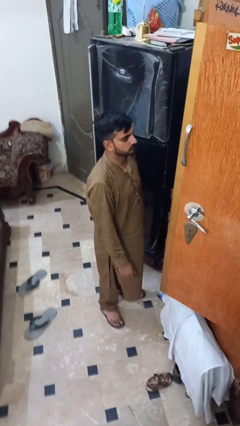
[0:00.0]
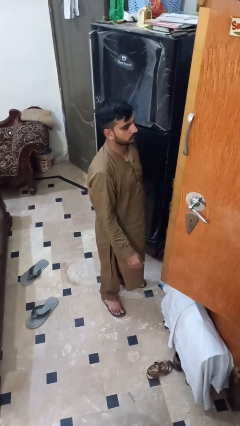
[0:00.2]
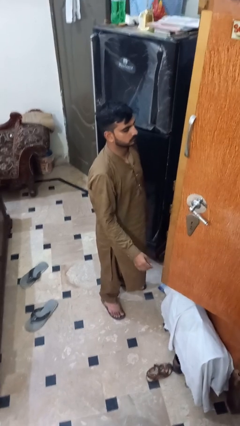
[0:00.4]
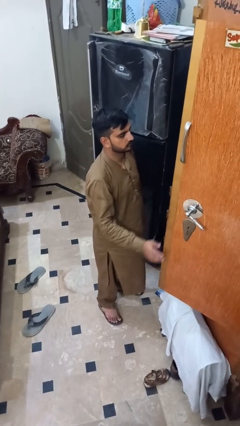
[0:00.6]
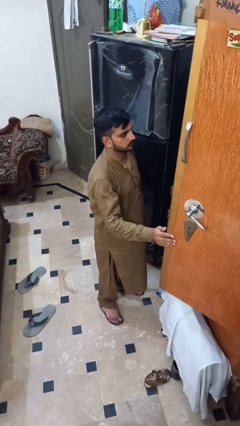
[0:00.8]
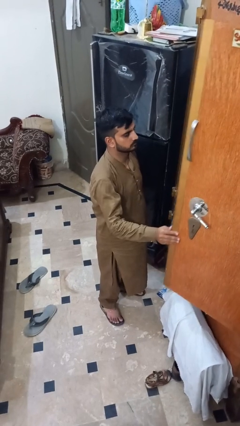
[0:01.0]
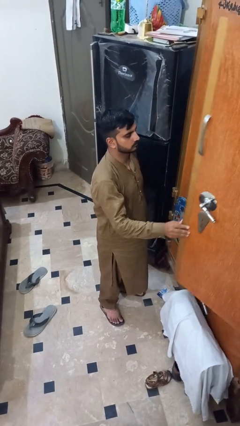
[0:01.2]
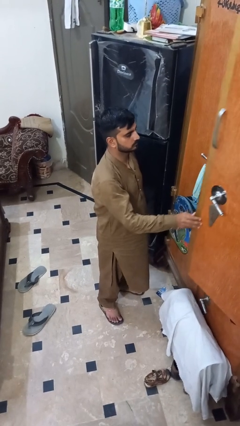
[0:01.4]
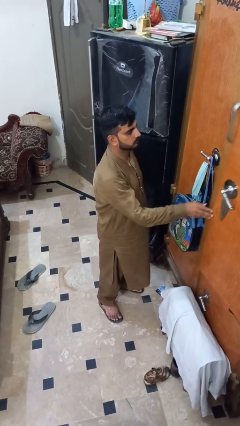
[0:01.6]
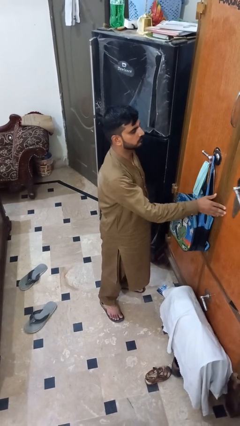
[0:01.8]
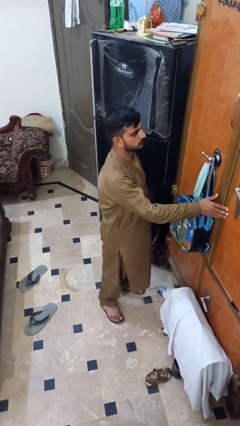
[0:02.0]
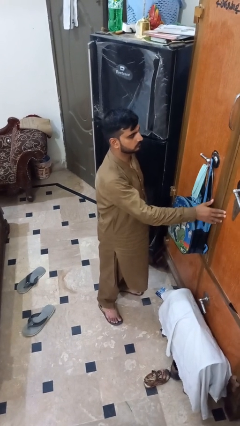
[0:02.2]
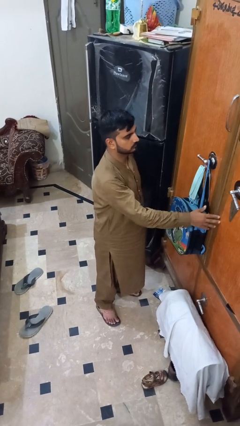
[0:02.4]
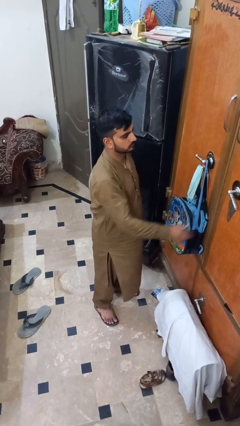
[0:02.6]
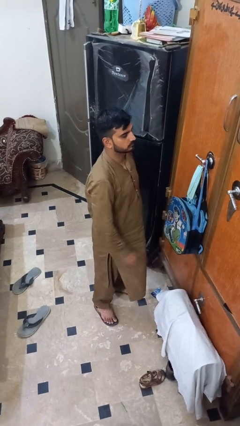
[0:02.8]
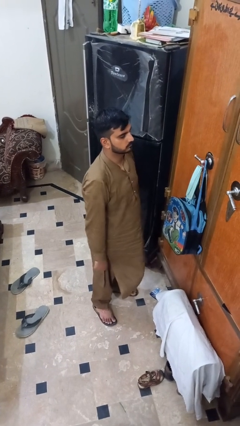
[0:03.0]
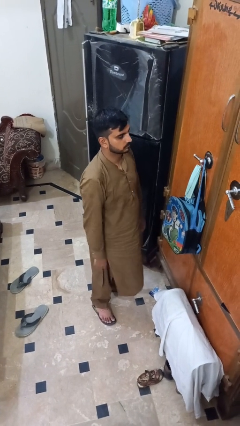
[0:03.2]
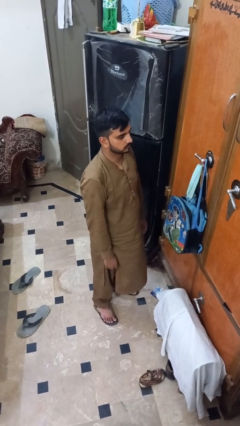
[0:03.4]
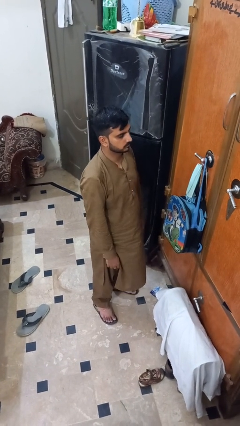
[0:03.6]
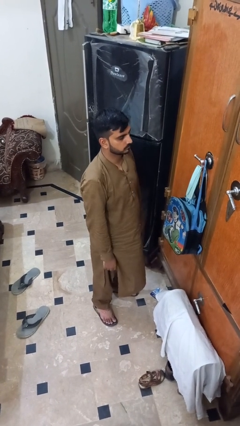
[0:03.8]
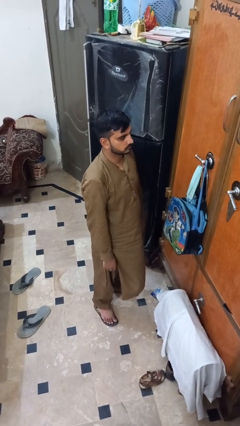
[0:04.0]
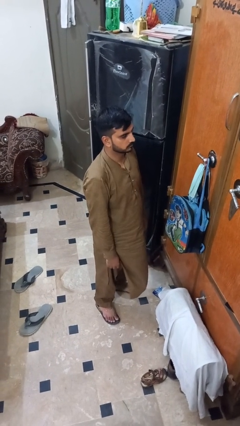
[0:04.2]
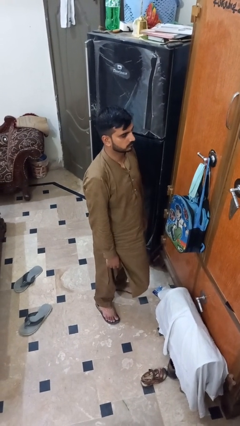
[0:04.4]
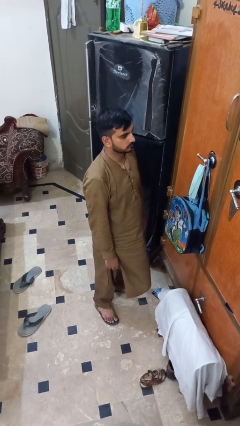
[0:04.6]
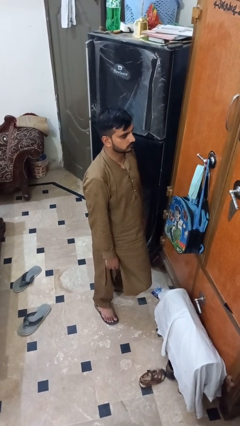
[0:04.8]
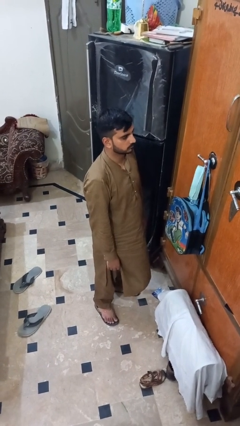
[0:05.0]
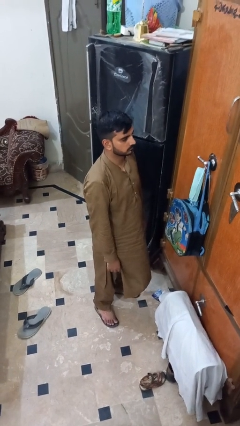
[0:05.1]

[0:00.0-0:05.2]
person closes box

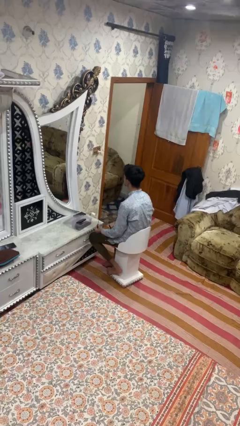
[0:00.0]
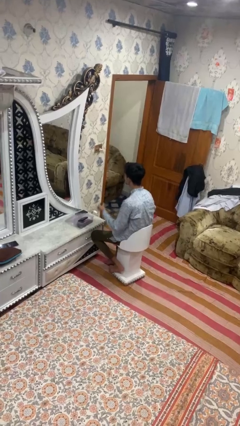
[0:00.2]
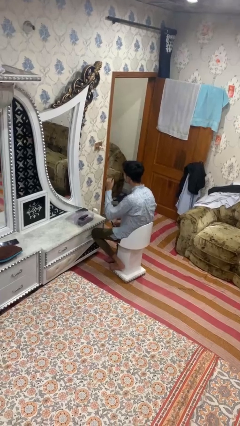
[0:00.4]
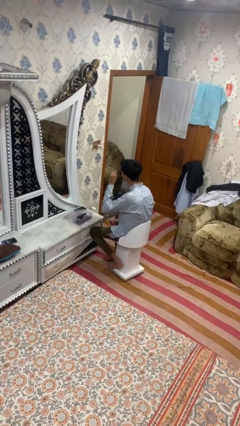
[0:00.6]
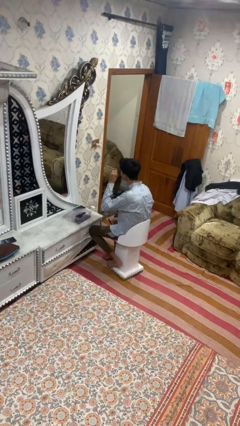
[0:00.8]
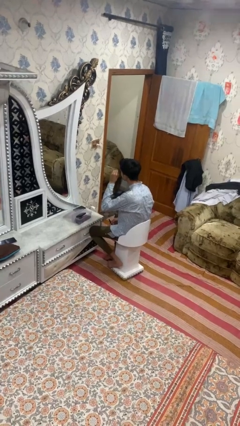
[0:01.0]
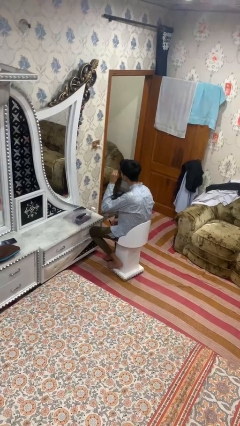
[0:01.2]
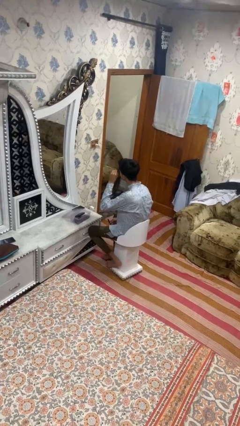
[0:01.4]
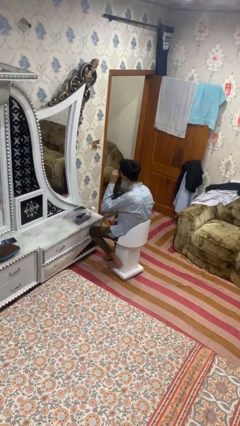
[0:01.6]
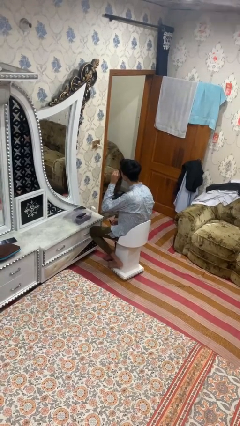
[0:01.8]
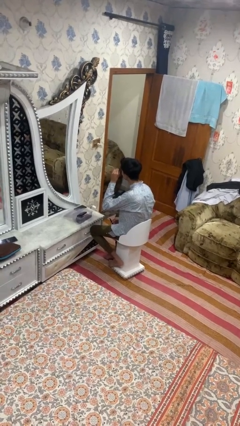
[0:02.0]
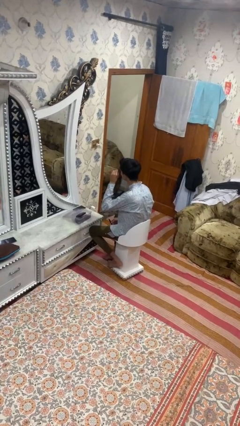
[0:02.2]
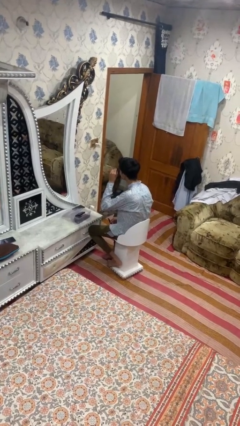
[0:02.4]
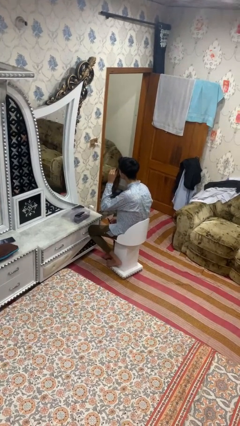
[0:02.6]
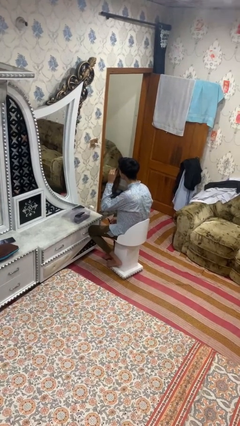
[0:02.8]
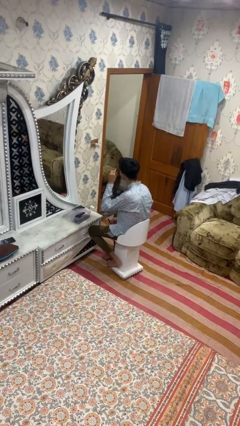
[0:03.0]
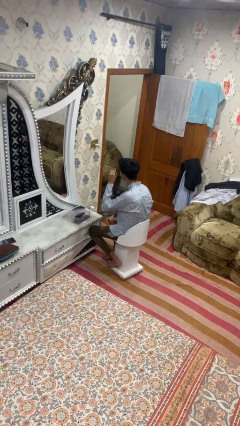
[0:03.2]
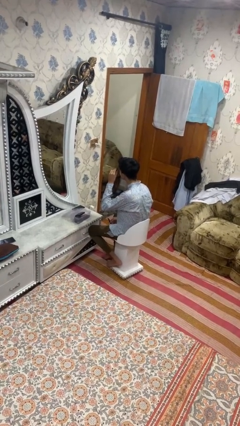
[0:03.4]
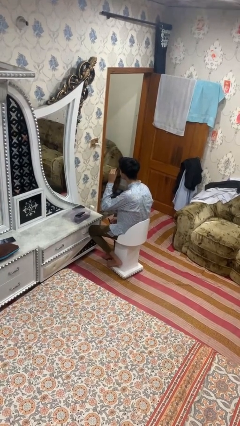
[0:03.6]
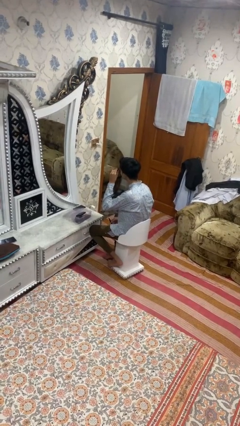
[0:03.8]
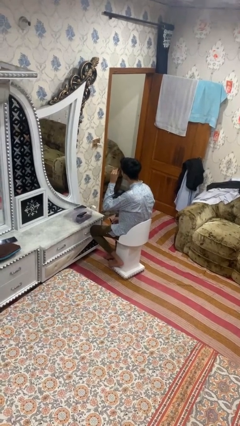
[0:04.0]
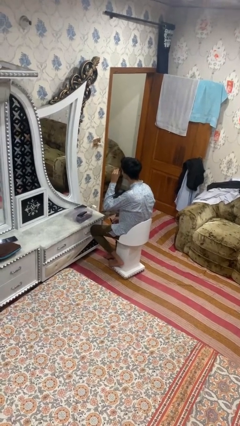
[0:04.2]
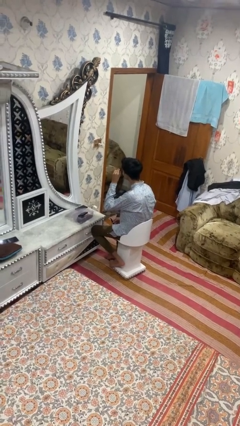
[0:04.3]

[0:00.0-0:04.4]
person applies eye makeup

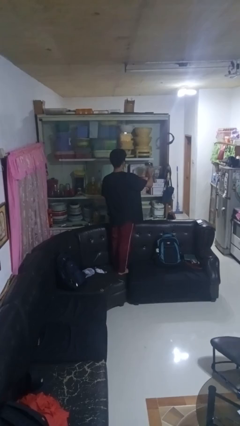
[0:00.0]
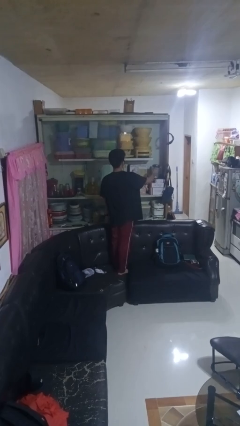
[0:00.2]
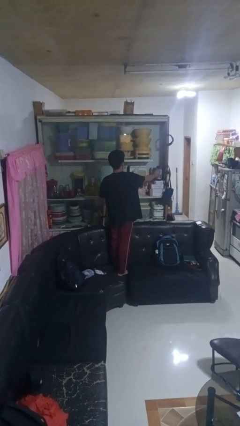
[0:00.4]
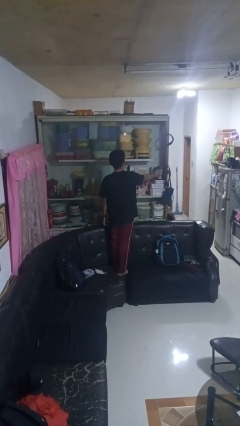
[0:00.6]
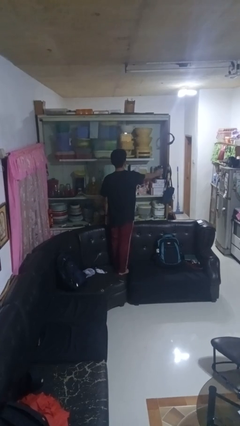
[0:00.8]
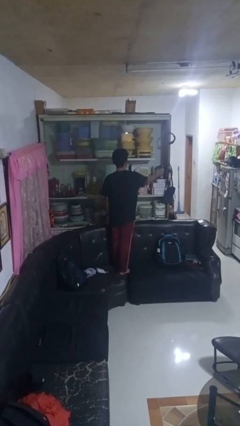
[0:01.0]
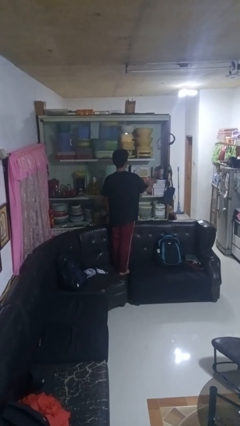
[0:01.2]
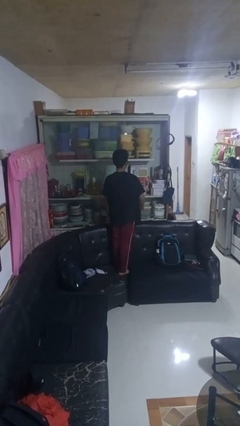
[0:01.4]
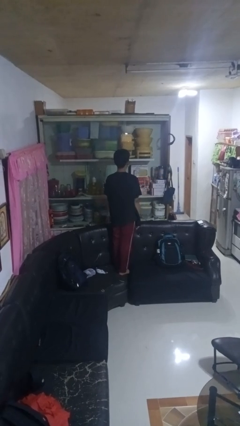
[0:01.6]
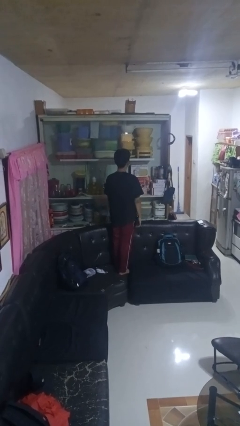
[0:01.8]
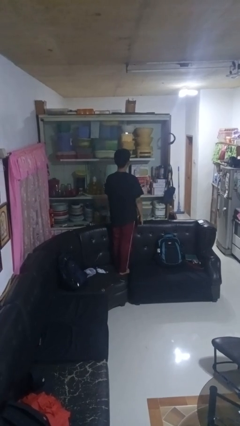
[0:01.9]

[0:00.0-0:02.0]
person puts down object into cabinet

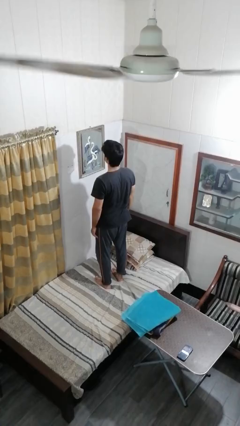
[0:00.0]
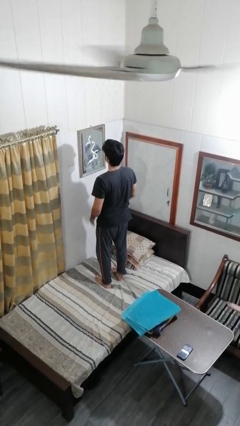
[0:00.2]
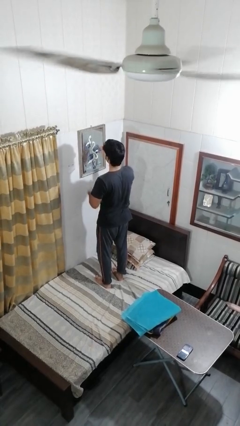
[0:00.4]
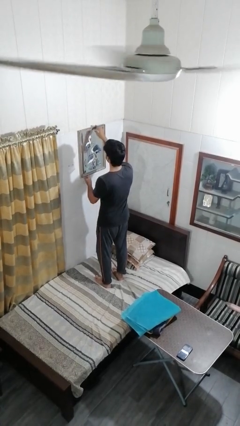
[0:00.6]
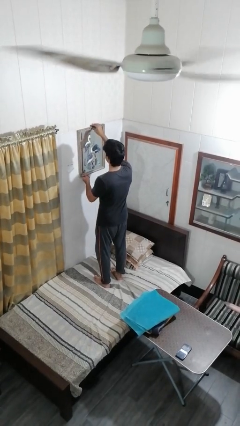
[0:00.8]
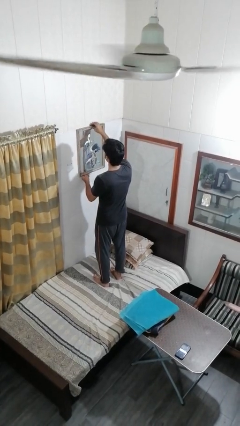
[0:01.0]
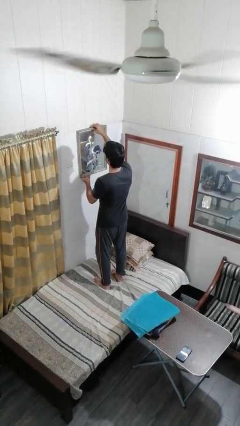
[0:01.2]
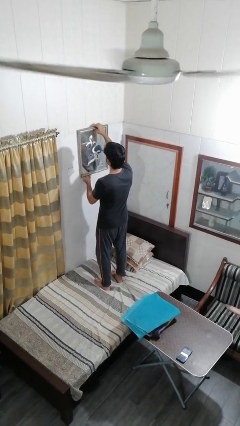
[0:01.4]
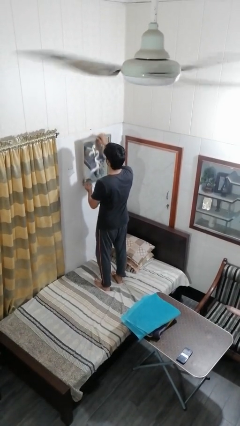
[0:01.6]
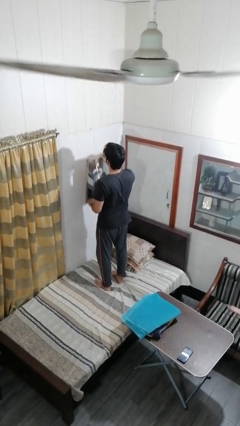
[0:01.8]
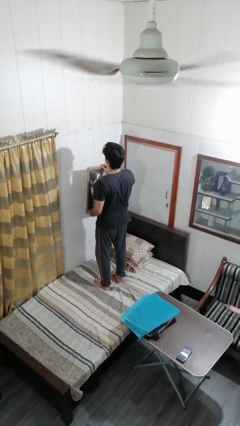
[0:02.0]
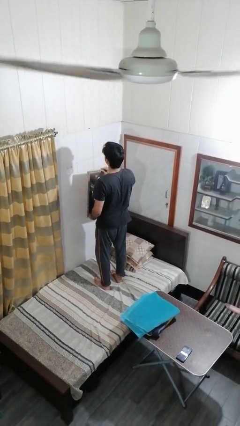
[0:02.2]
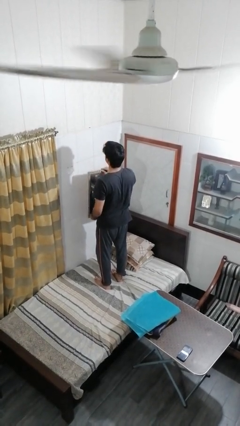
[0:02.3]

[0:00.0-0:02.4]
person takes down picture frame

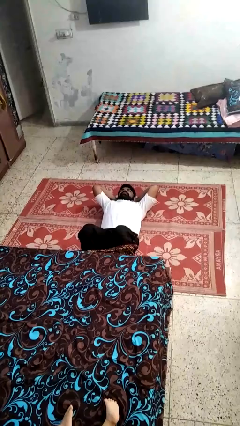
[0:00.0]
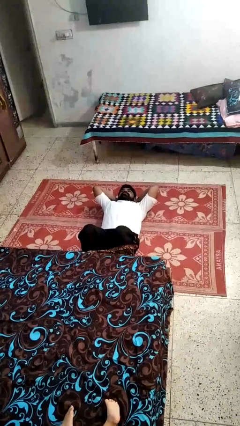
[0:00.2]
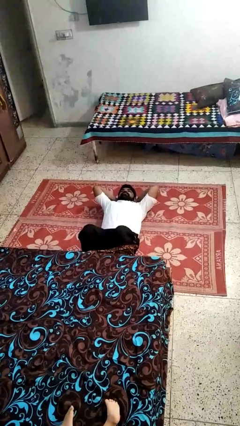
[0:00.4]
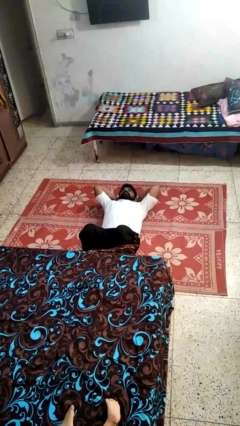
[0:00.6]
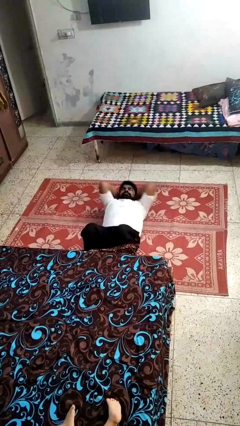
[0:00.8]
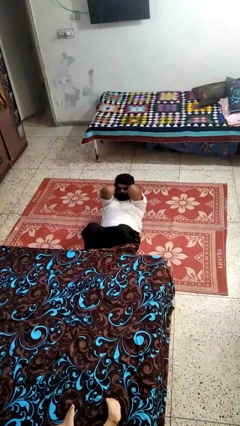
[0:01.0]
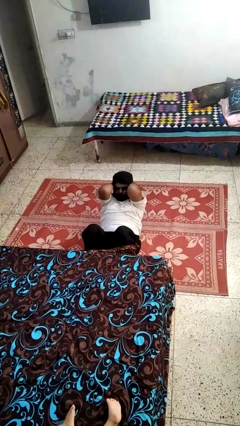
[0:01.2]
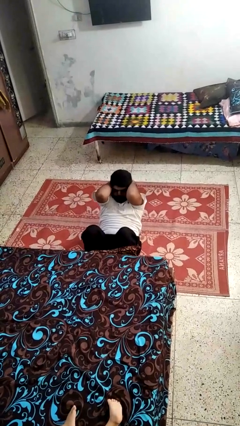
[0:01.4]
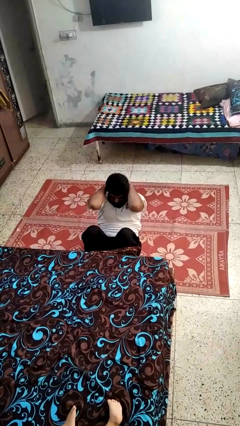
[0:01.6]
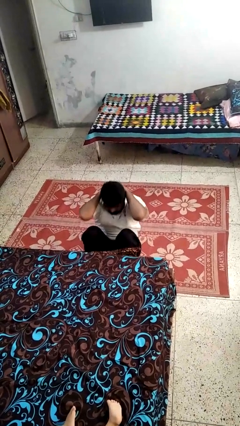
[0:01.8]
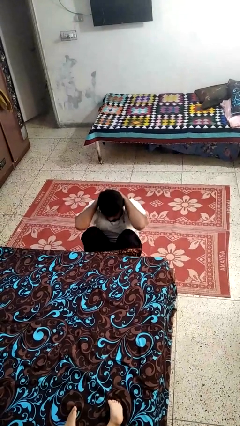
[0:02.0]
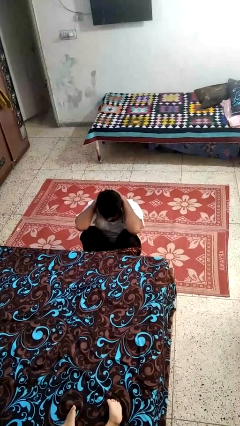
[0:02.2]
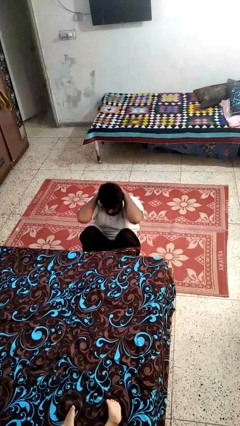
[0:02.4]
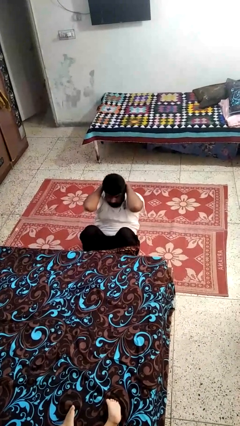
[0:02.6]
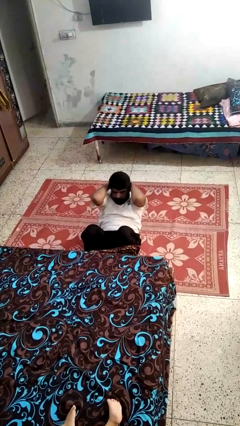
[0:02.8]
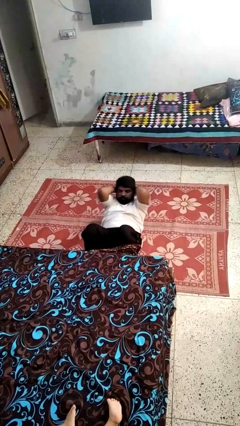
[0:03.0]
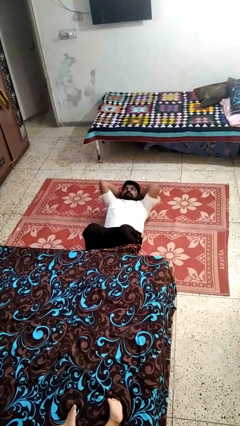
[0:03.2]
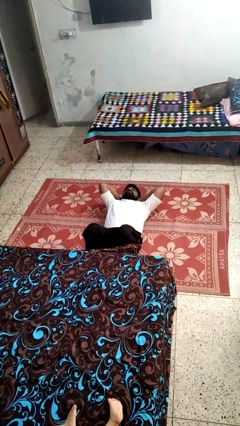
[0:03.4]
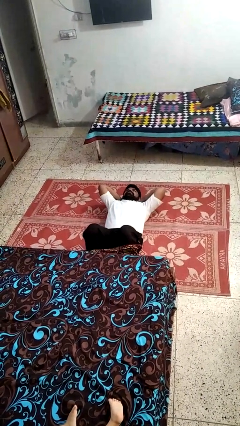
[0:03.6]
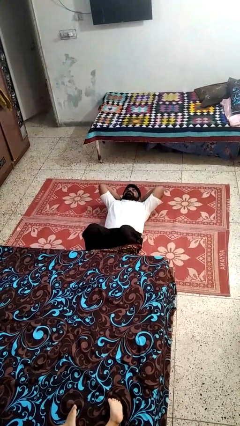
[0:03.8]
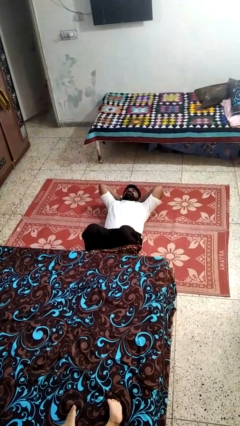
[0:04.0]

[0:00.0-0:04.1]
person exercises with situp
